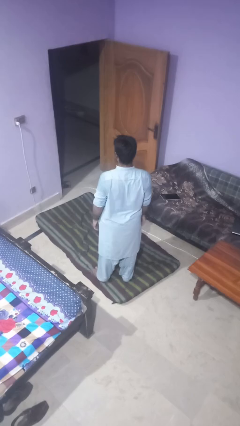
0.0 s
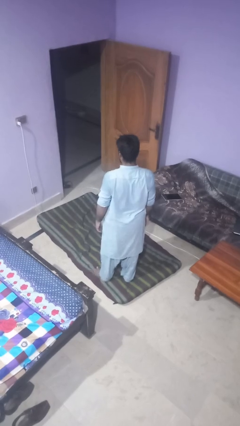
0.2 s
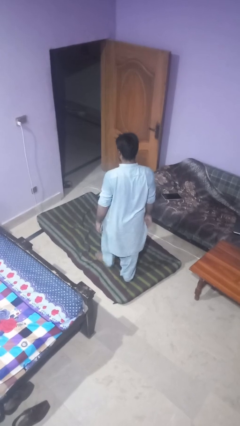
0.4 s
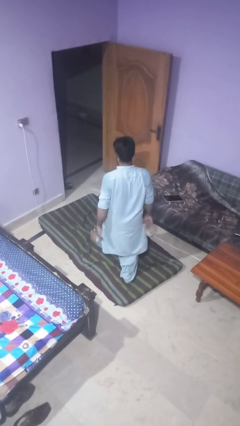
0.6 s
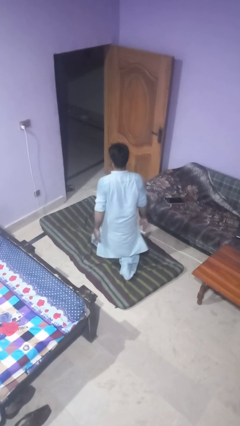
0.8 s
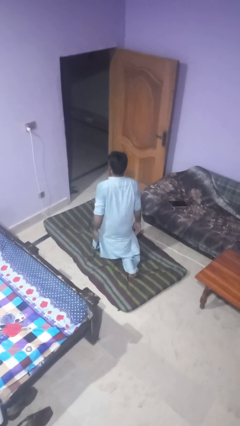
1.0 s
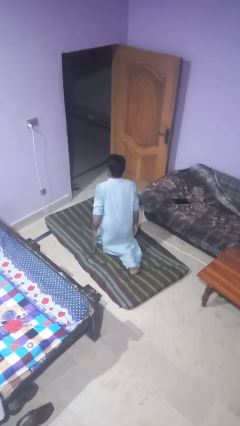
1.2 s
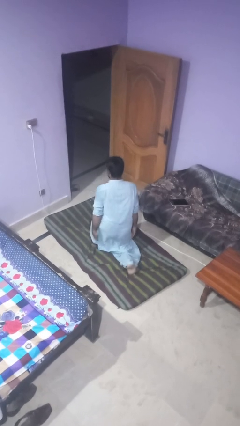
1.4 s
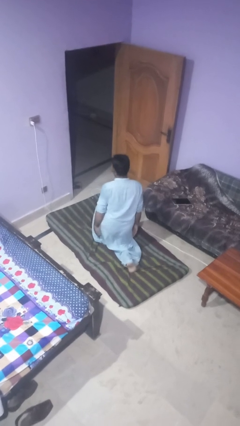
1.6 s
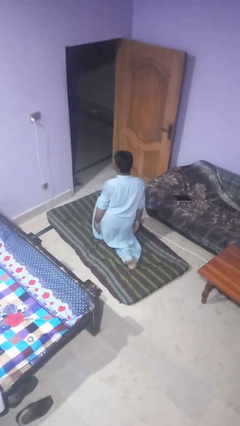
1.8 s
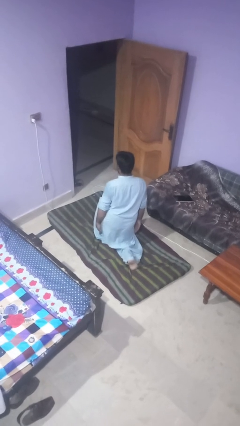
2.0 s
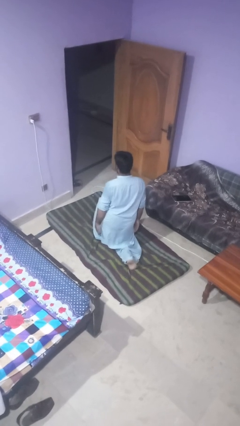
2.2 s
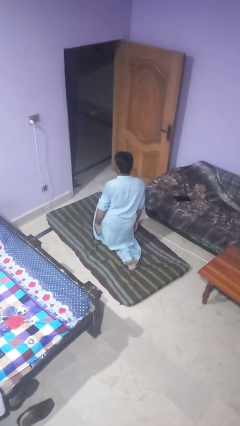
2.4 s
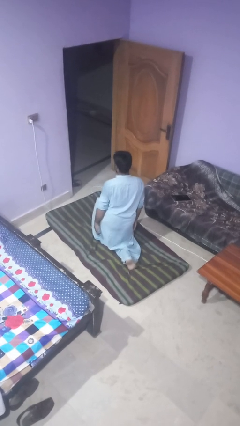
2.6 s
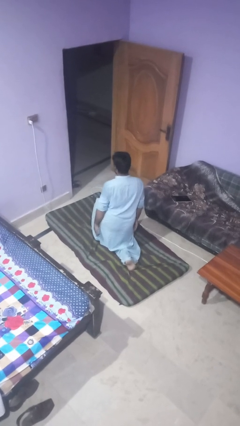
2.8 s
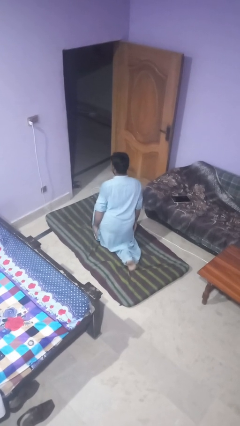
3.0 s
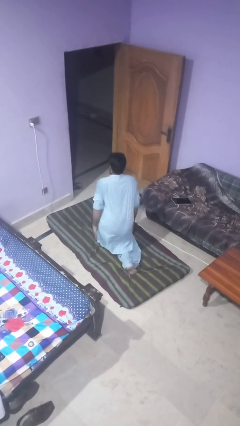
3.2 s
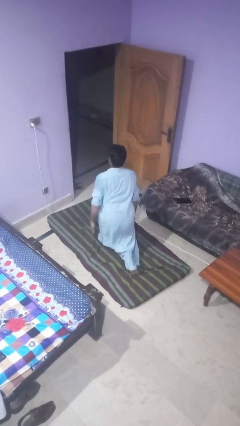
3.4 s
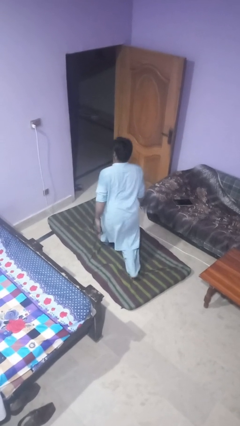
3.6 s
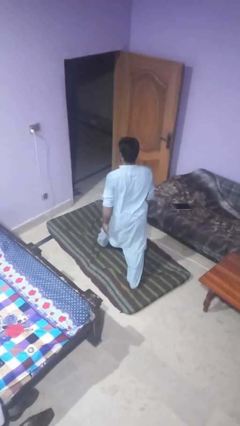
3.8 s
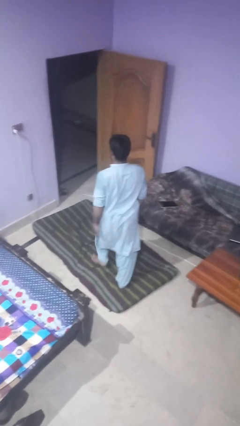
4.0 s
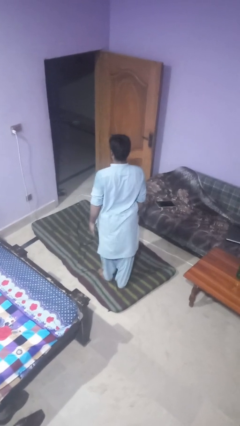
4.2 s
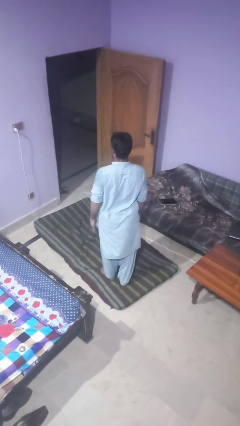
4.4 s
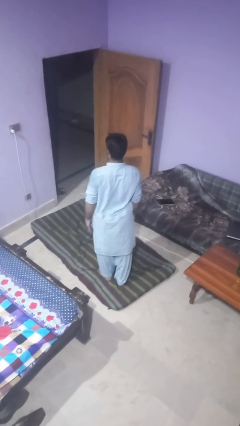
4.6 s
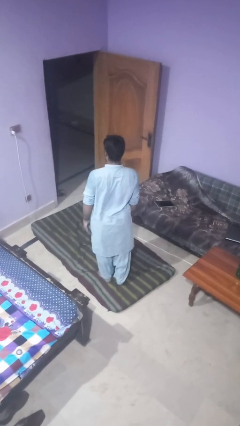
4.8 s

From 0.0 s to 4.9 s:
person exercises with lunges

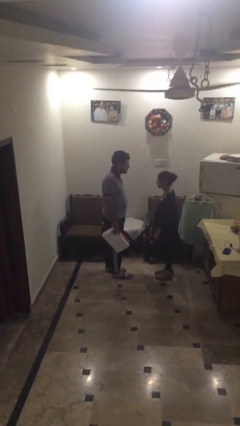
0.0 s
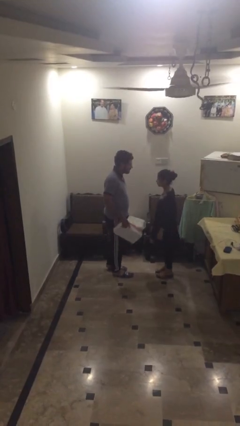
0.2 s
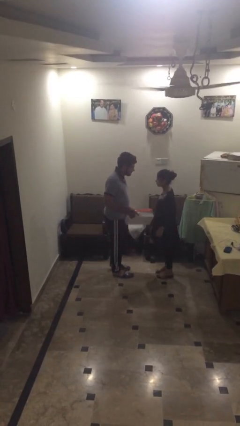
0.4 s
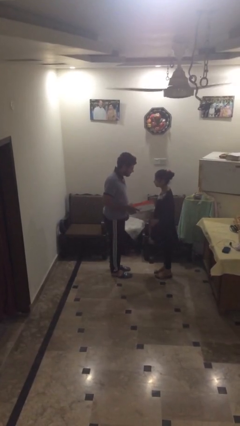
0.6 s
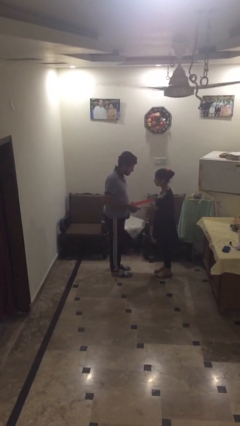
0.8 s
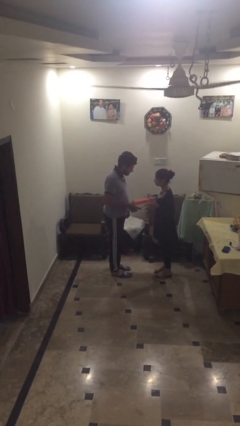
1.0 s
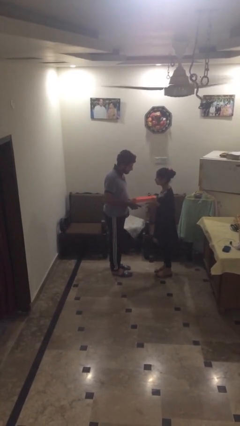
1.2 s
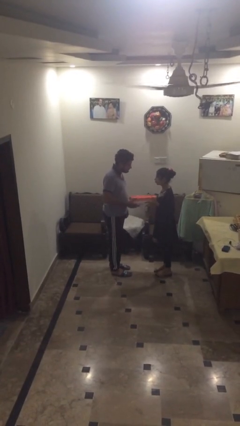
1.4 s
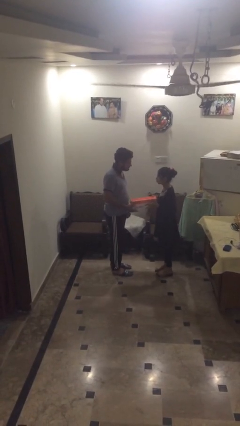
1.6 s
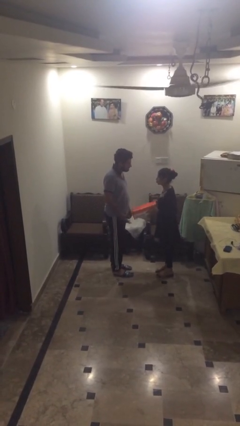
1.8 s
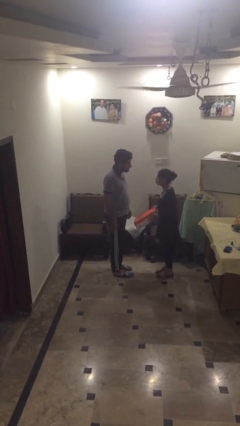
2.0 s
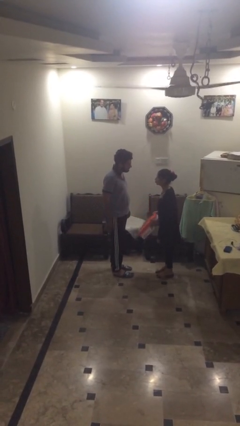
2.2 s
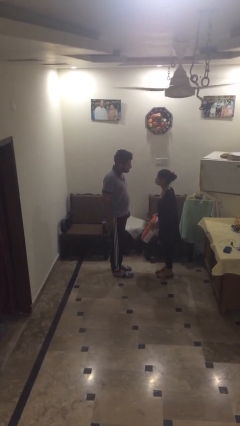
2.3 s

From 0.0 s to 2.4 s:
person transfers object to person

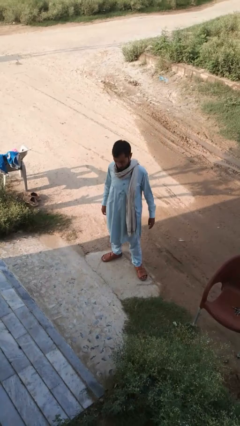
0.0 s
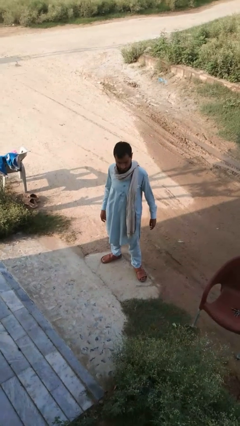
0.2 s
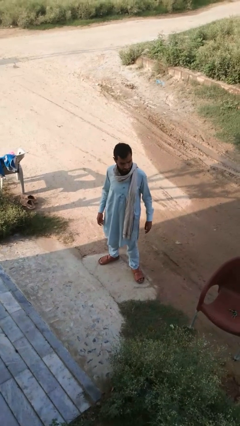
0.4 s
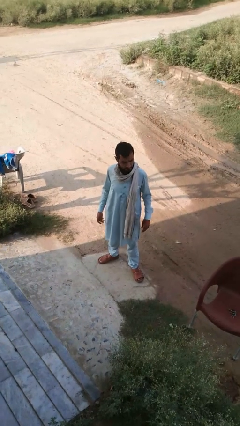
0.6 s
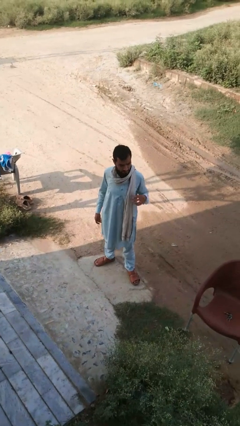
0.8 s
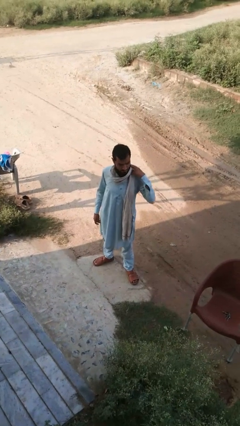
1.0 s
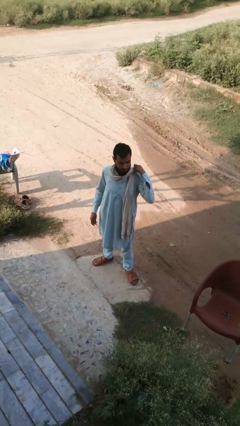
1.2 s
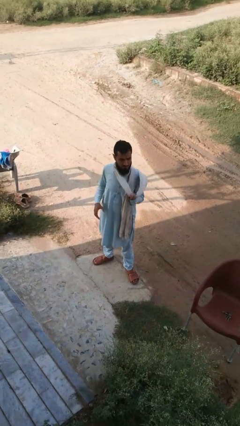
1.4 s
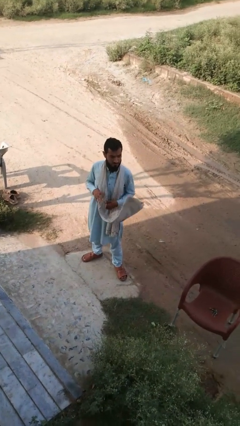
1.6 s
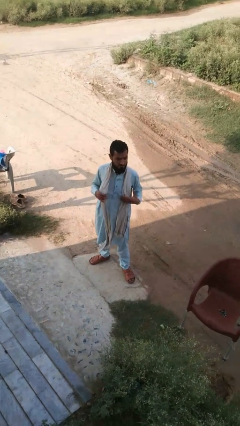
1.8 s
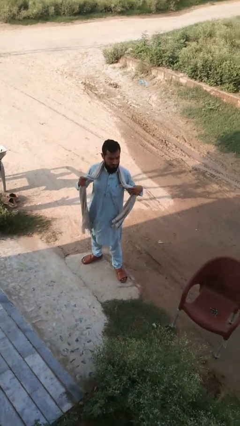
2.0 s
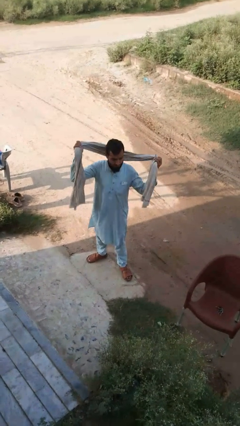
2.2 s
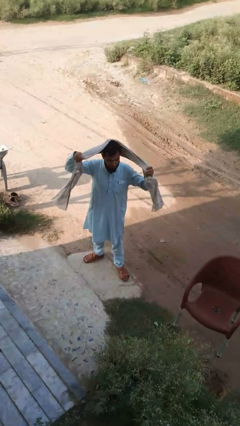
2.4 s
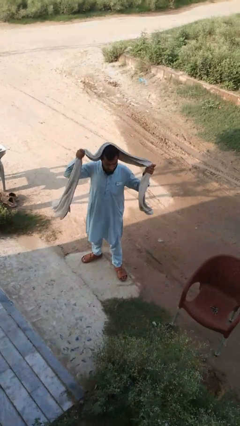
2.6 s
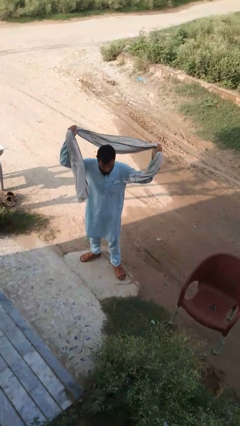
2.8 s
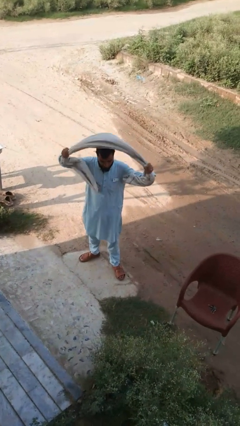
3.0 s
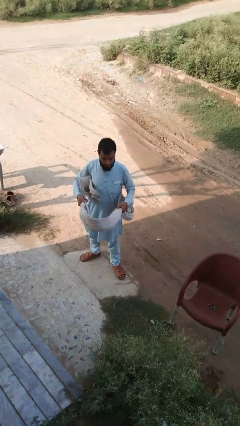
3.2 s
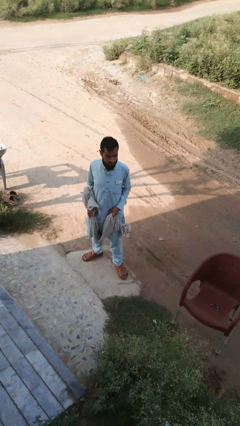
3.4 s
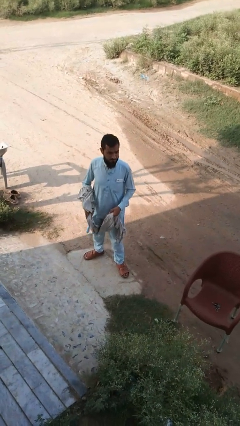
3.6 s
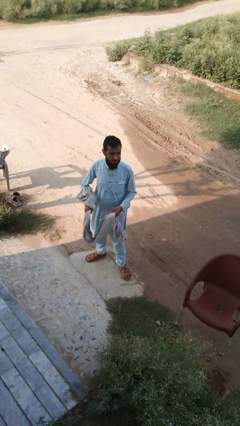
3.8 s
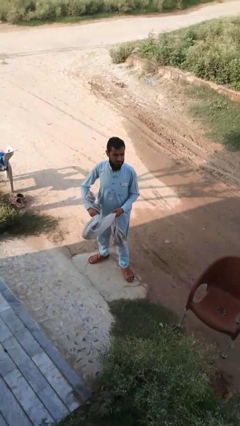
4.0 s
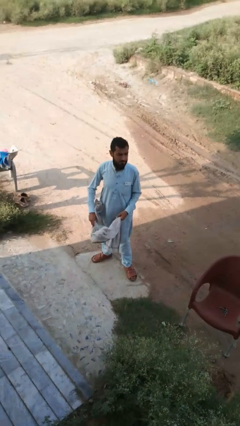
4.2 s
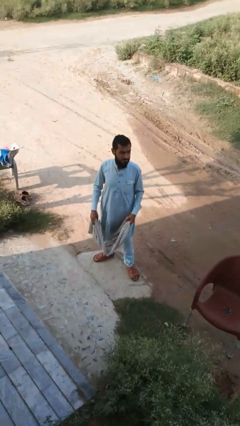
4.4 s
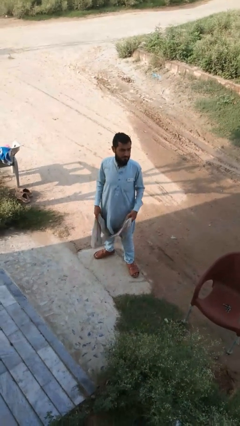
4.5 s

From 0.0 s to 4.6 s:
person takes off scarf

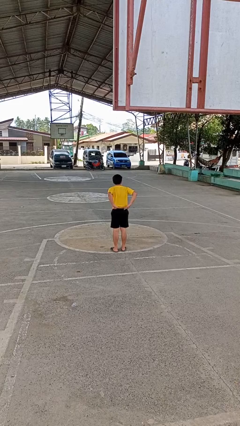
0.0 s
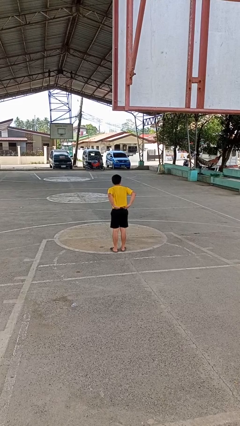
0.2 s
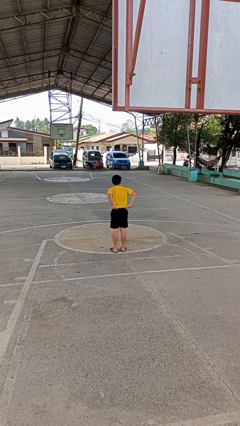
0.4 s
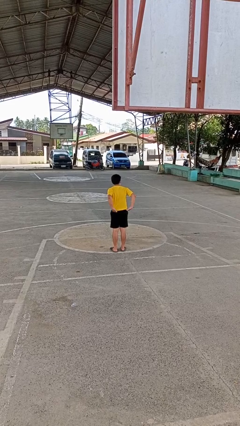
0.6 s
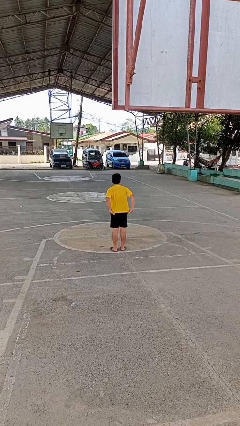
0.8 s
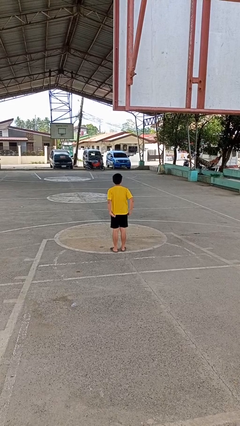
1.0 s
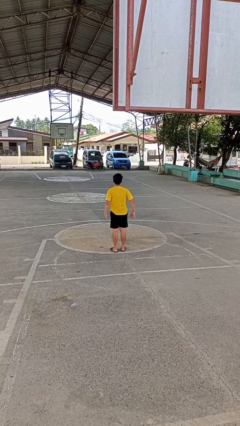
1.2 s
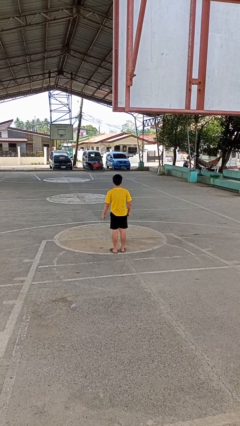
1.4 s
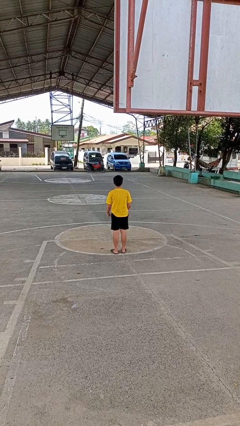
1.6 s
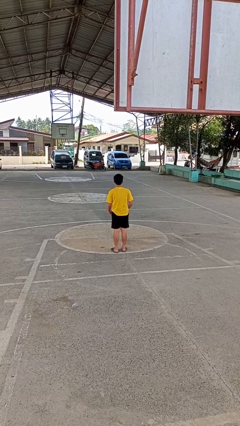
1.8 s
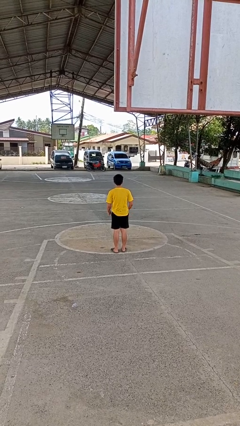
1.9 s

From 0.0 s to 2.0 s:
person untucks shirt

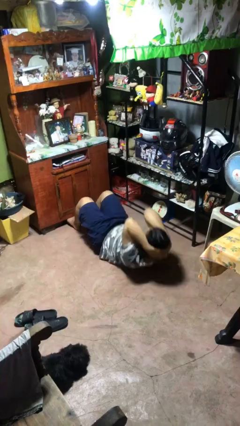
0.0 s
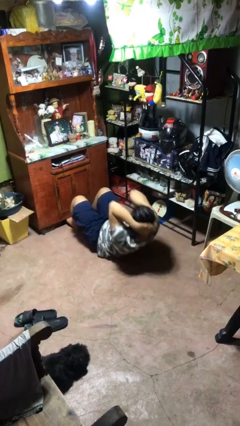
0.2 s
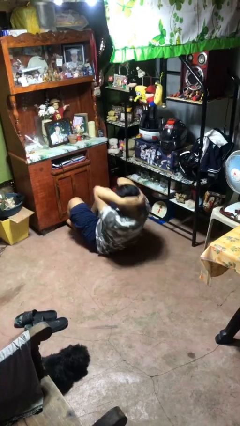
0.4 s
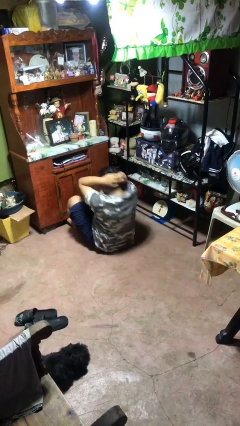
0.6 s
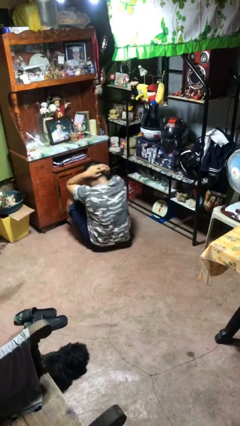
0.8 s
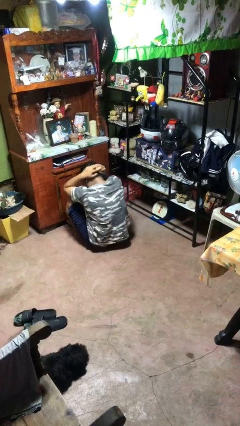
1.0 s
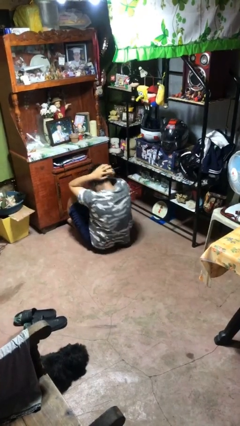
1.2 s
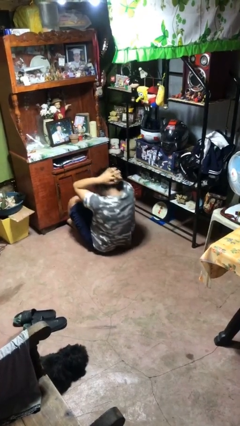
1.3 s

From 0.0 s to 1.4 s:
person exercises with situp

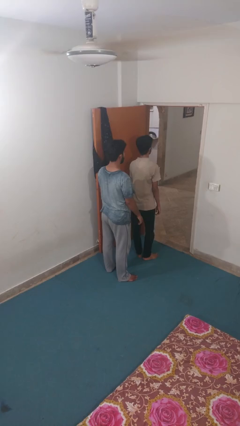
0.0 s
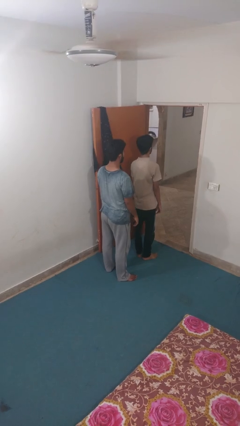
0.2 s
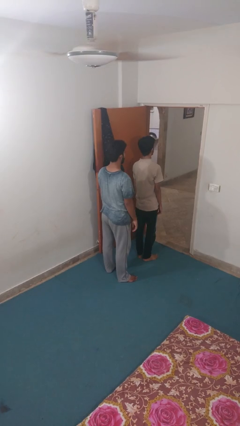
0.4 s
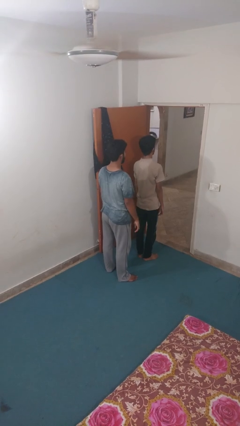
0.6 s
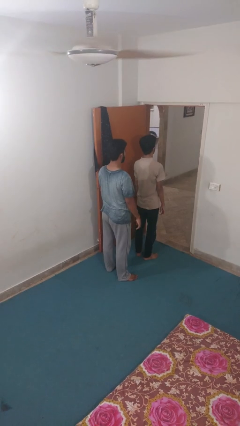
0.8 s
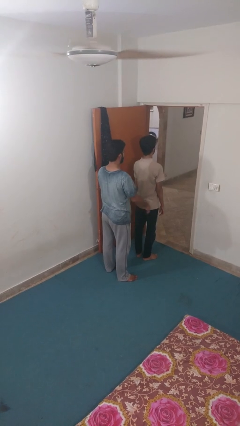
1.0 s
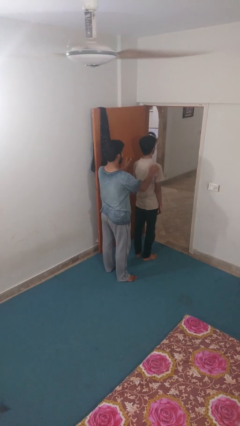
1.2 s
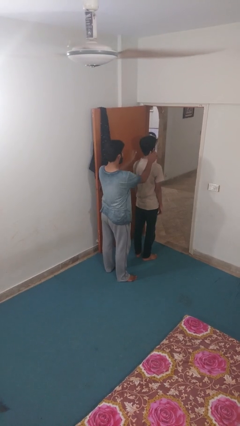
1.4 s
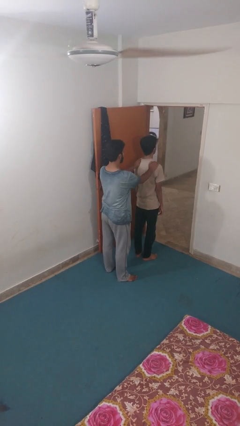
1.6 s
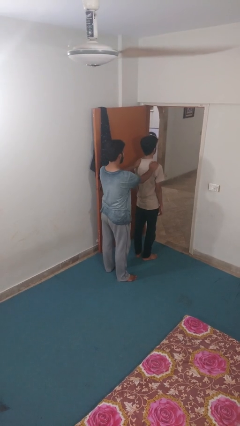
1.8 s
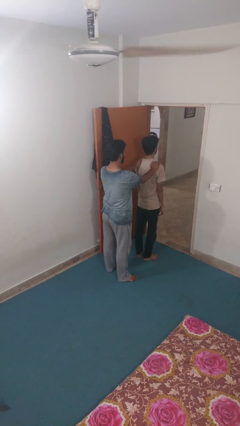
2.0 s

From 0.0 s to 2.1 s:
person grabs person by shoulder

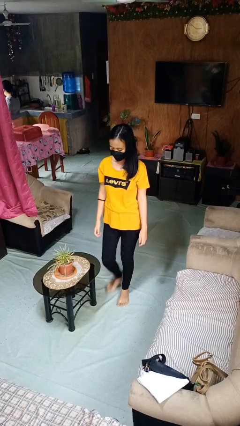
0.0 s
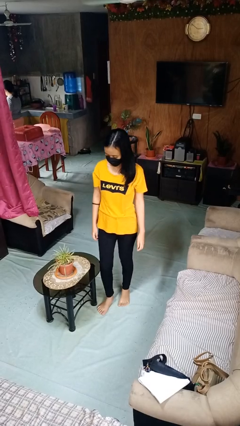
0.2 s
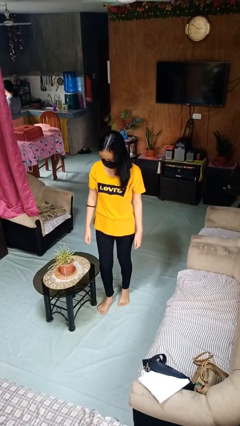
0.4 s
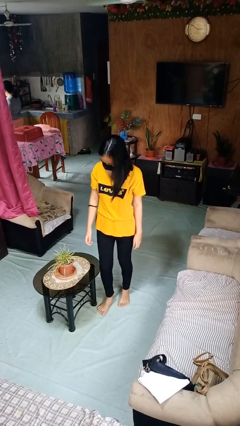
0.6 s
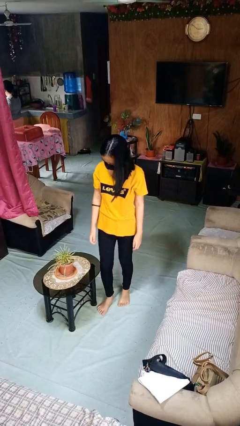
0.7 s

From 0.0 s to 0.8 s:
person bumps into table
